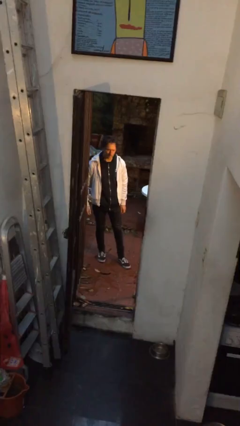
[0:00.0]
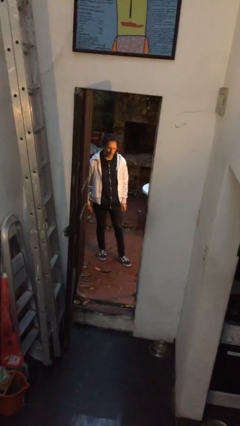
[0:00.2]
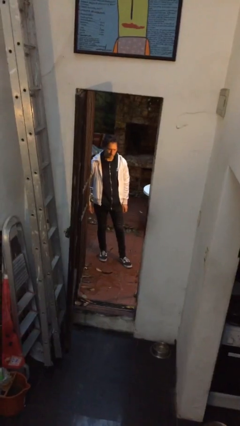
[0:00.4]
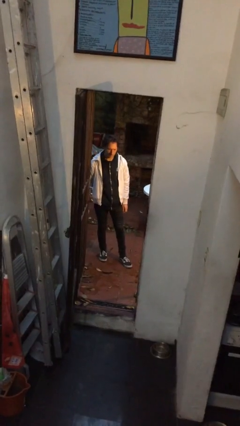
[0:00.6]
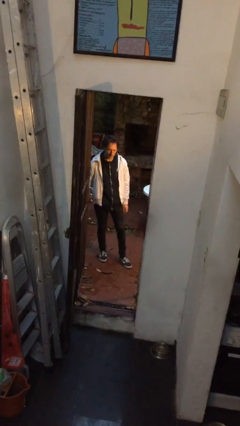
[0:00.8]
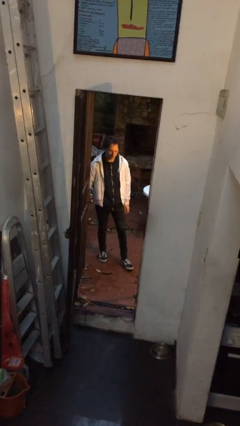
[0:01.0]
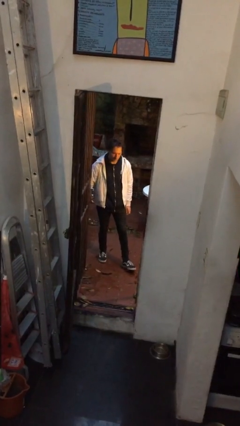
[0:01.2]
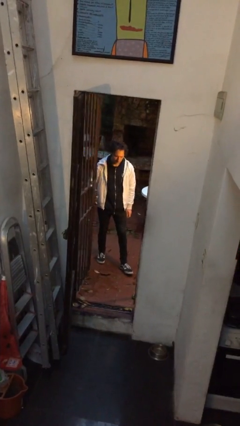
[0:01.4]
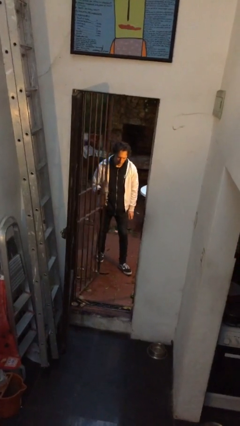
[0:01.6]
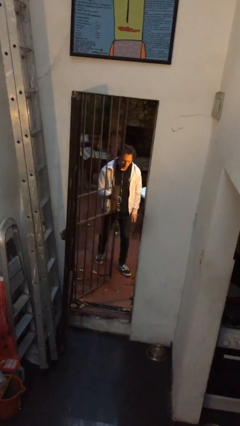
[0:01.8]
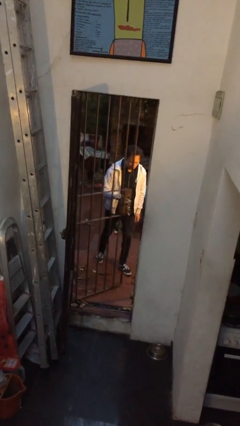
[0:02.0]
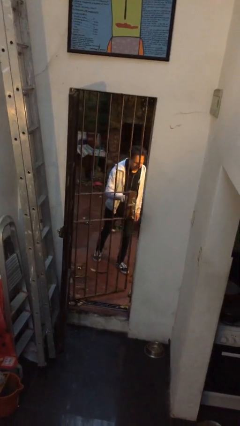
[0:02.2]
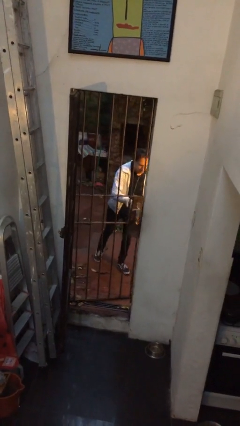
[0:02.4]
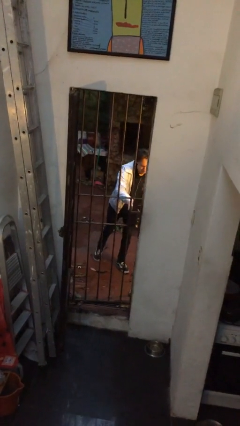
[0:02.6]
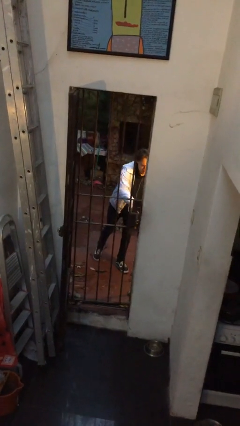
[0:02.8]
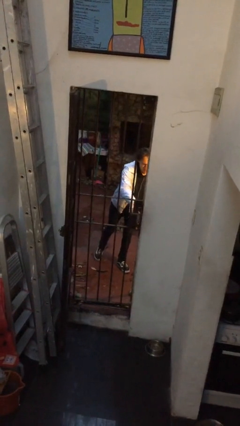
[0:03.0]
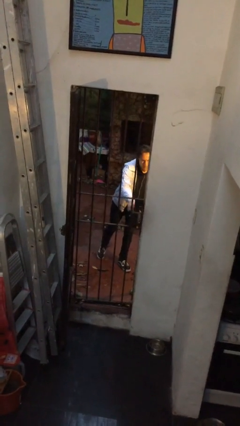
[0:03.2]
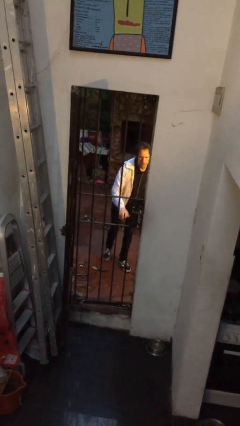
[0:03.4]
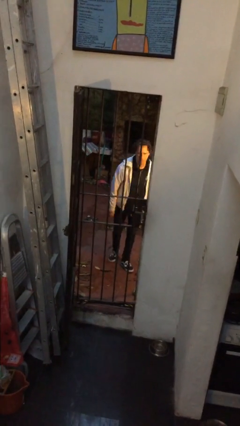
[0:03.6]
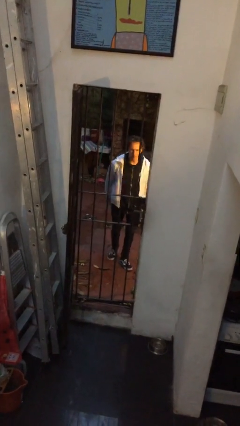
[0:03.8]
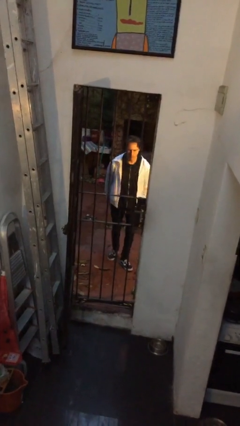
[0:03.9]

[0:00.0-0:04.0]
person closes gate

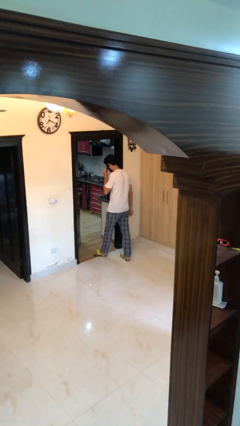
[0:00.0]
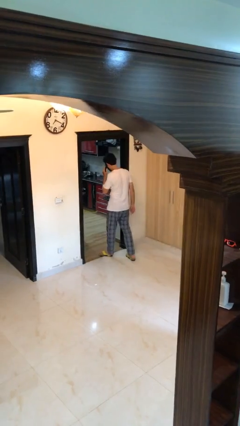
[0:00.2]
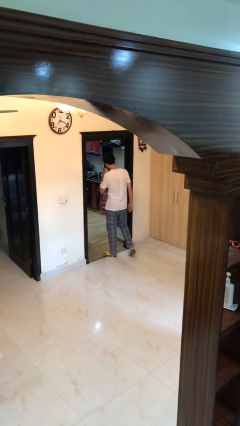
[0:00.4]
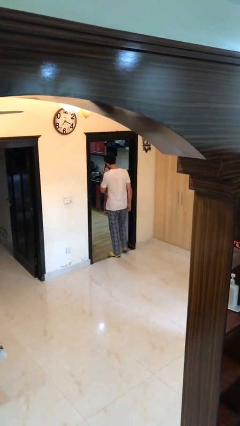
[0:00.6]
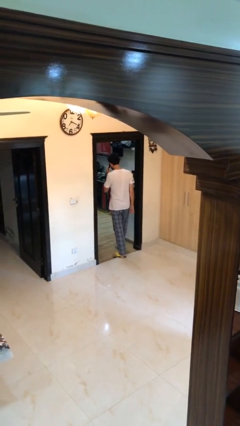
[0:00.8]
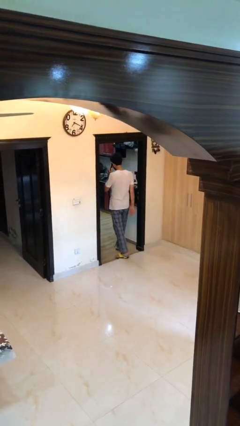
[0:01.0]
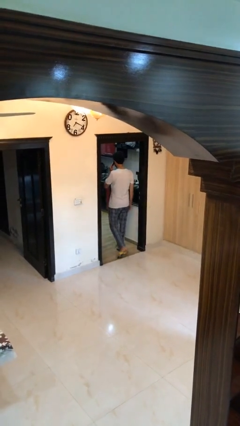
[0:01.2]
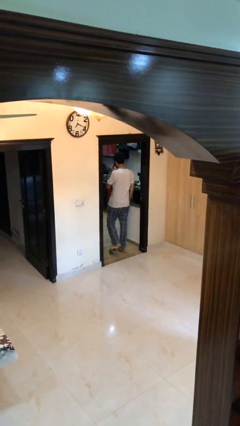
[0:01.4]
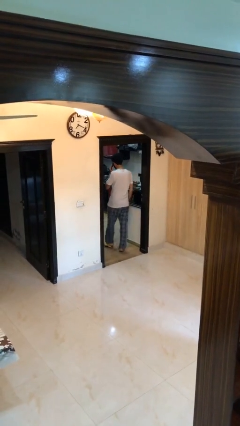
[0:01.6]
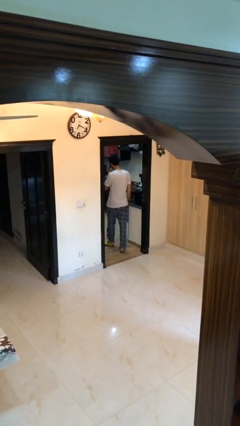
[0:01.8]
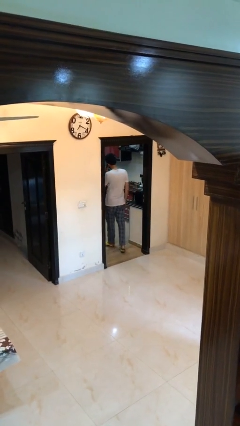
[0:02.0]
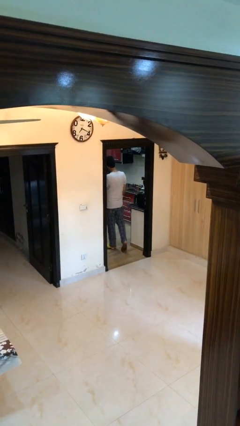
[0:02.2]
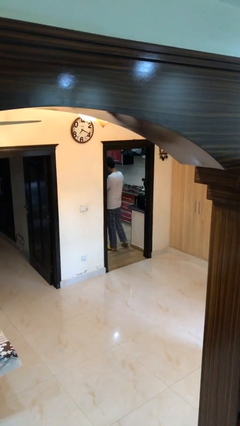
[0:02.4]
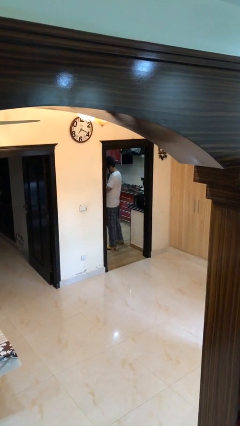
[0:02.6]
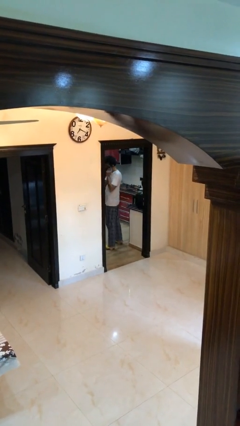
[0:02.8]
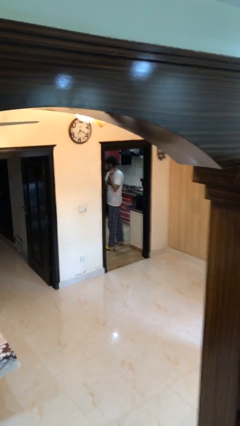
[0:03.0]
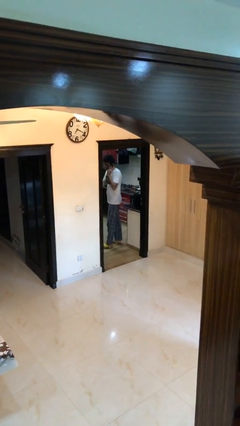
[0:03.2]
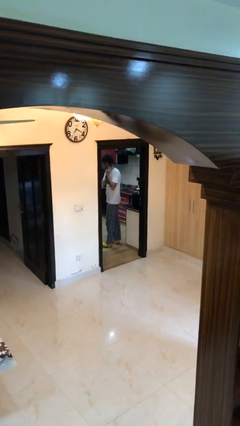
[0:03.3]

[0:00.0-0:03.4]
person exits scene through structure

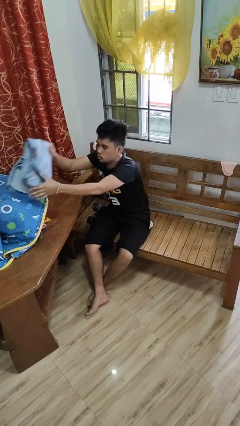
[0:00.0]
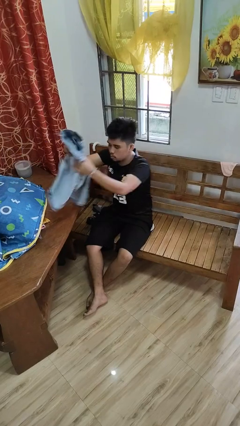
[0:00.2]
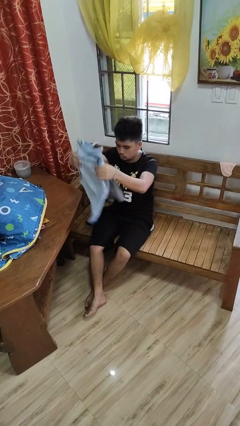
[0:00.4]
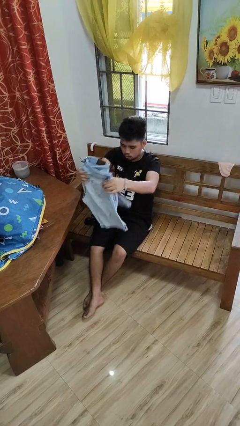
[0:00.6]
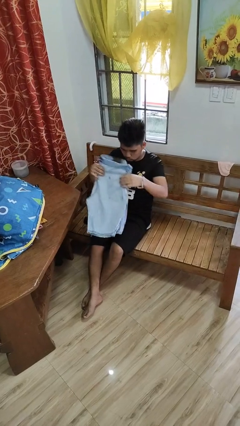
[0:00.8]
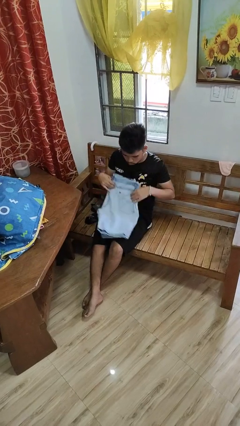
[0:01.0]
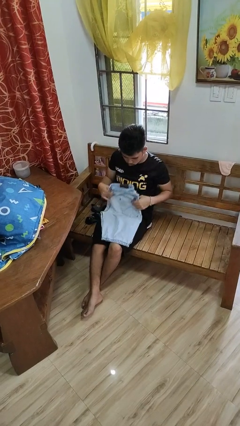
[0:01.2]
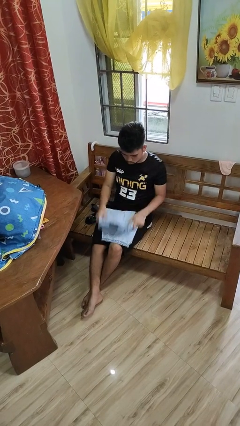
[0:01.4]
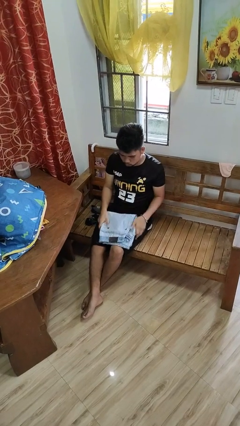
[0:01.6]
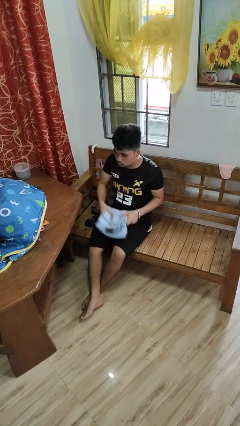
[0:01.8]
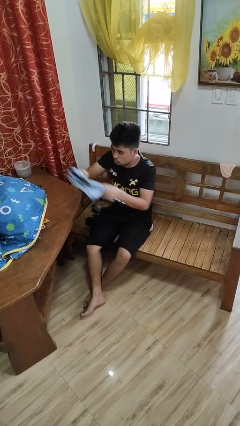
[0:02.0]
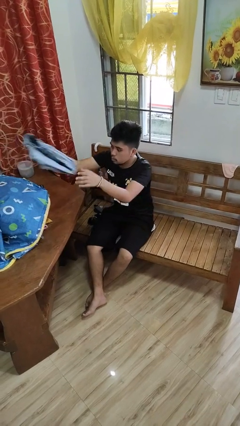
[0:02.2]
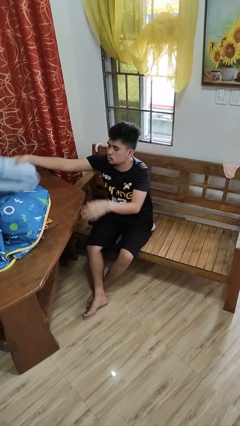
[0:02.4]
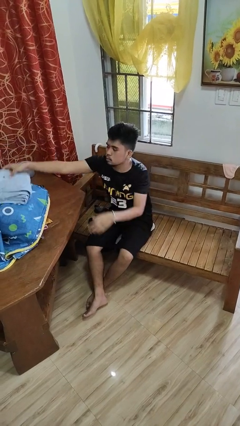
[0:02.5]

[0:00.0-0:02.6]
person folds pants

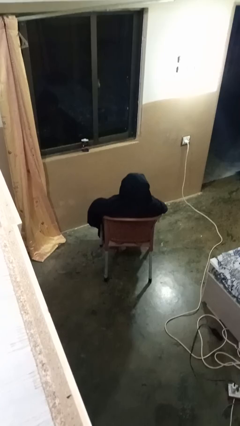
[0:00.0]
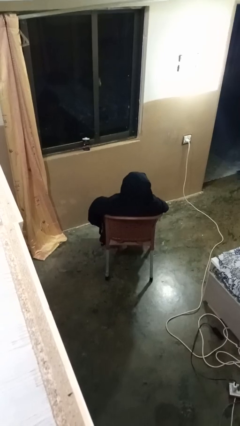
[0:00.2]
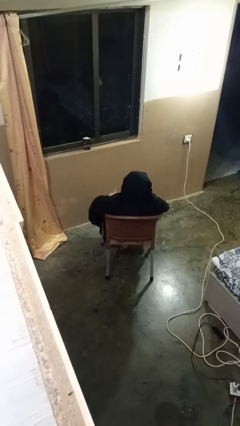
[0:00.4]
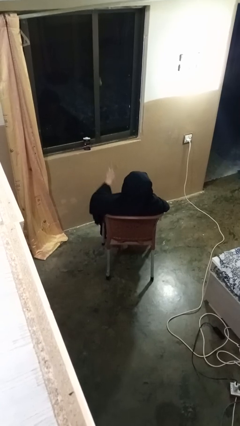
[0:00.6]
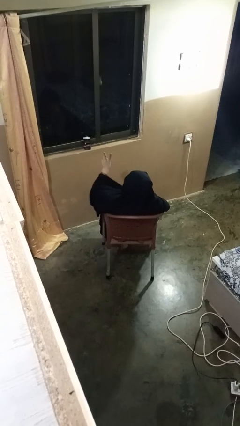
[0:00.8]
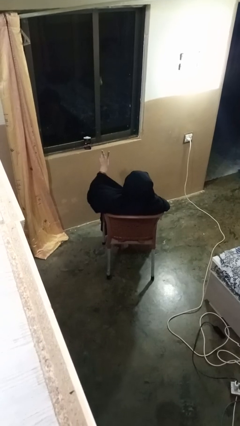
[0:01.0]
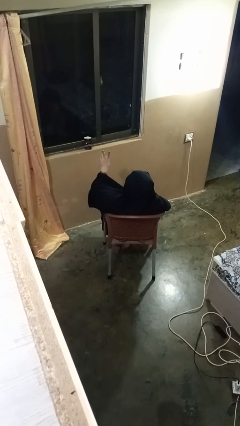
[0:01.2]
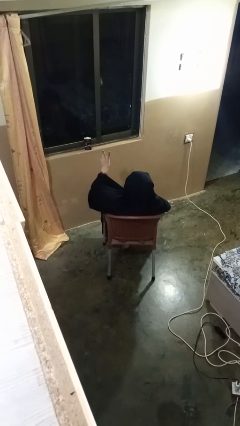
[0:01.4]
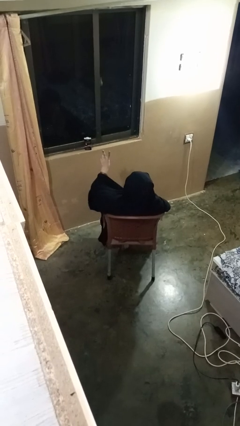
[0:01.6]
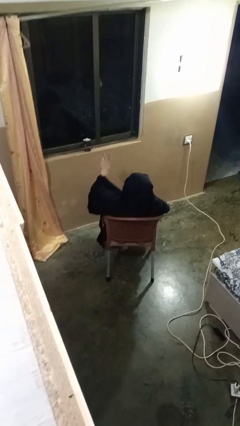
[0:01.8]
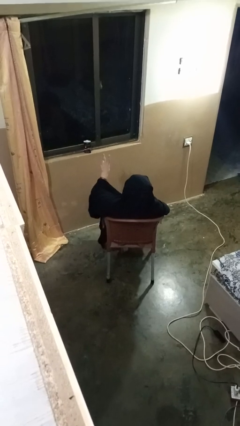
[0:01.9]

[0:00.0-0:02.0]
person gestures peace

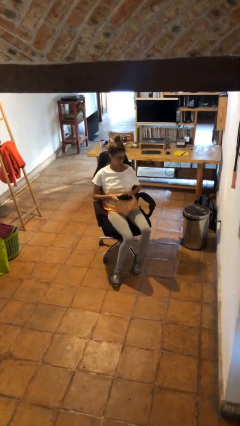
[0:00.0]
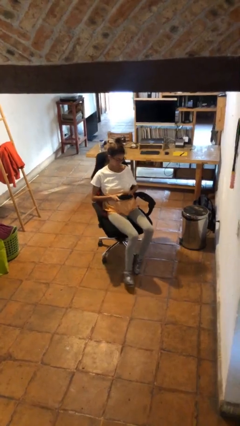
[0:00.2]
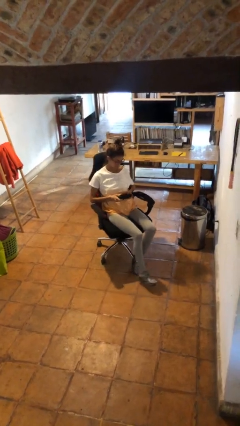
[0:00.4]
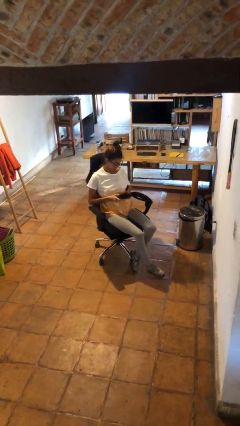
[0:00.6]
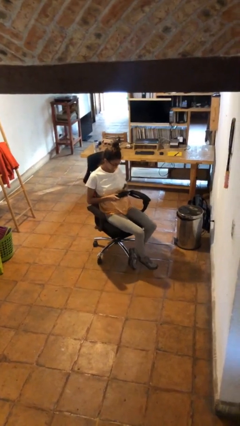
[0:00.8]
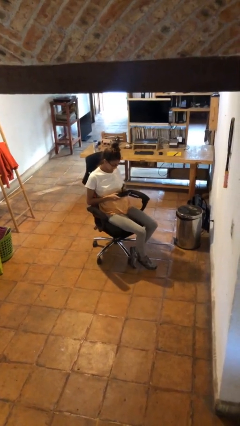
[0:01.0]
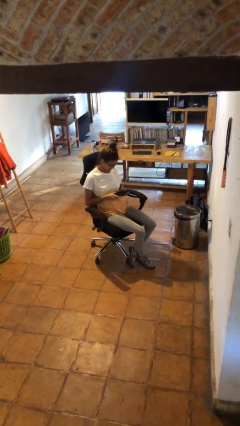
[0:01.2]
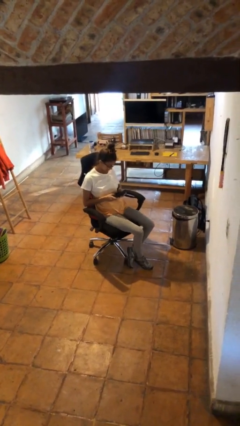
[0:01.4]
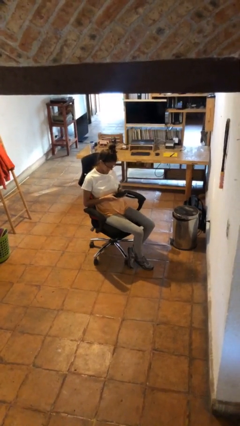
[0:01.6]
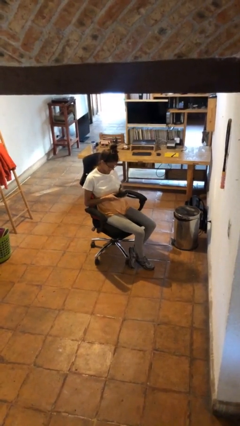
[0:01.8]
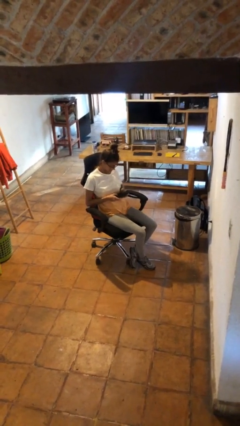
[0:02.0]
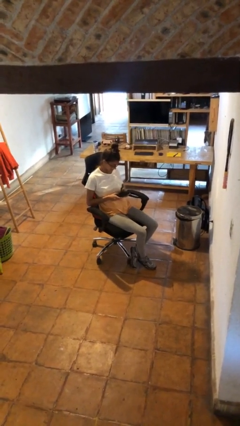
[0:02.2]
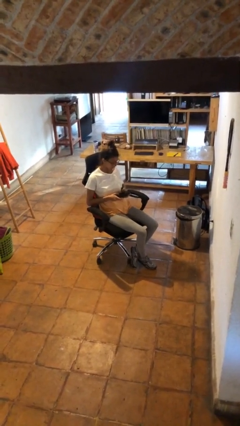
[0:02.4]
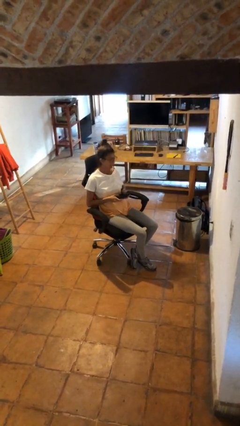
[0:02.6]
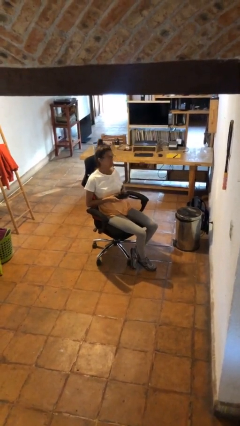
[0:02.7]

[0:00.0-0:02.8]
person interacts with handheld game

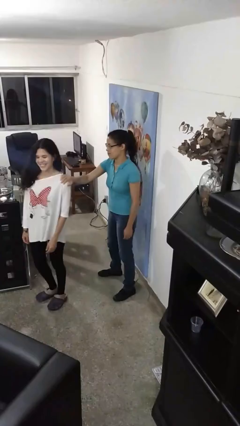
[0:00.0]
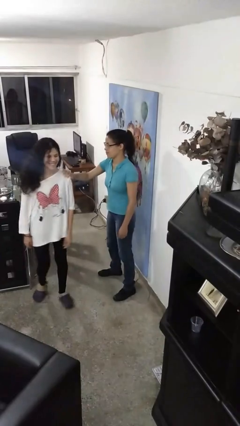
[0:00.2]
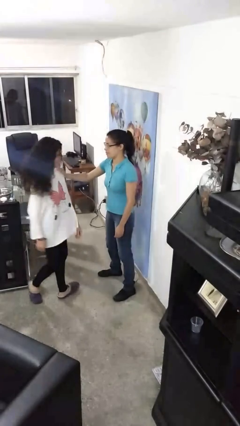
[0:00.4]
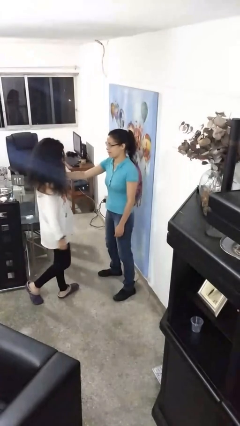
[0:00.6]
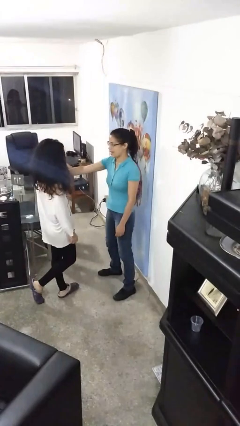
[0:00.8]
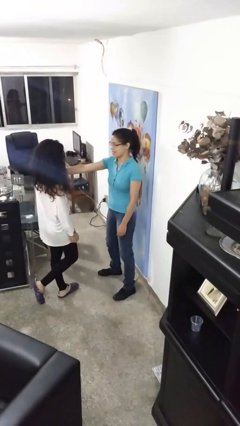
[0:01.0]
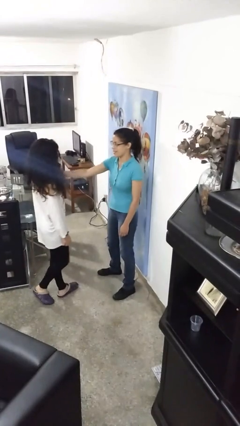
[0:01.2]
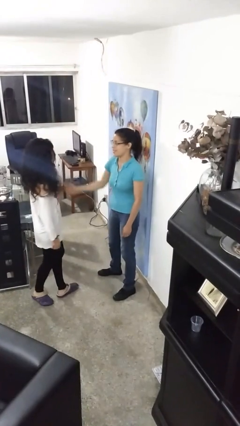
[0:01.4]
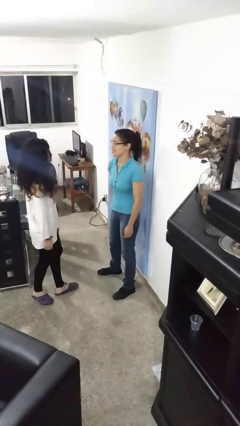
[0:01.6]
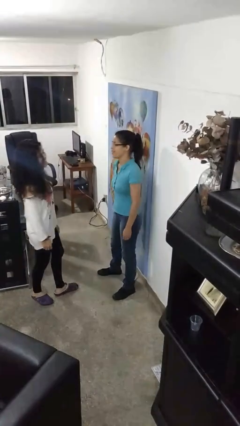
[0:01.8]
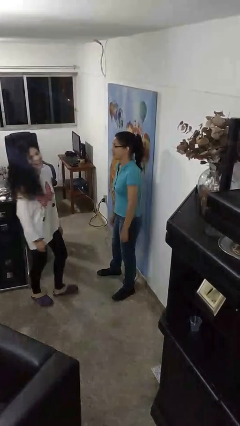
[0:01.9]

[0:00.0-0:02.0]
person spins person around

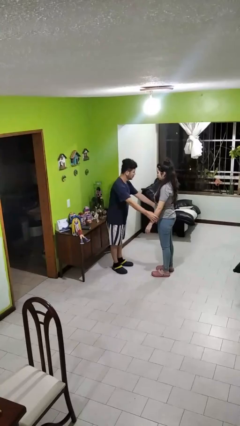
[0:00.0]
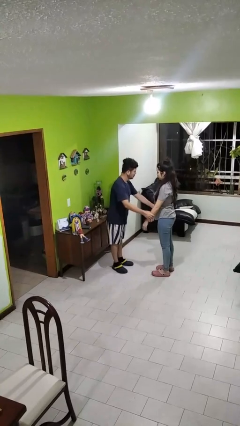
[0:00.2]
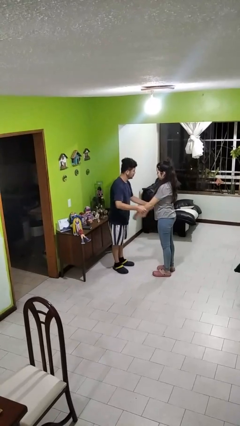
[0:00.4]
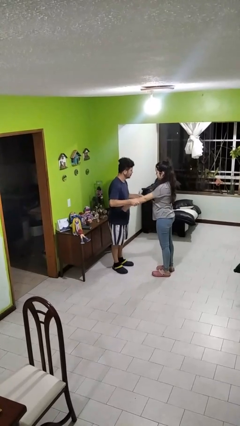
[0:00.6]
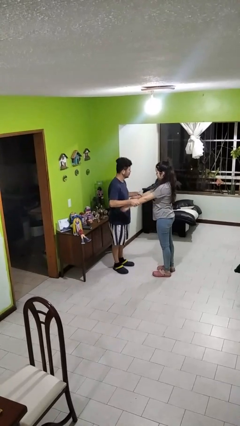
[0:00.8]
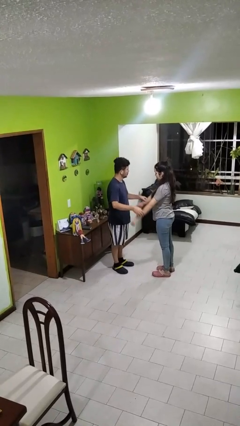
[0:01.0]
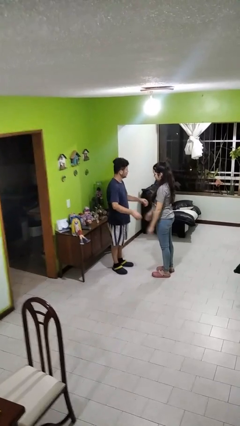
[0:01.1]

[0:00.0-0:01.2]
person grabs person by forearm
